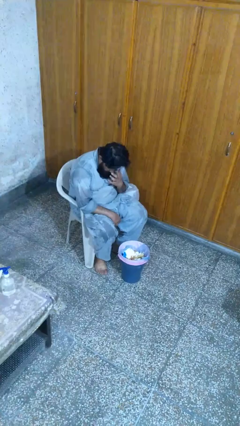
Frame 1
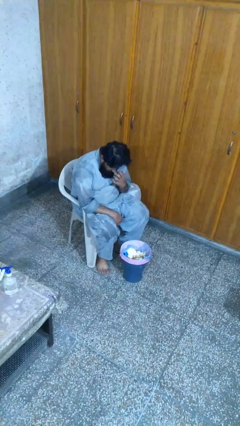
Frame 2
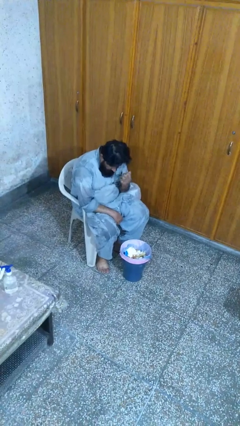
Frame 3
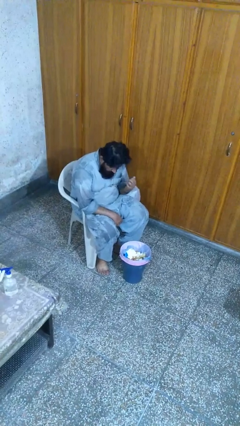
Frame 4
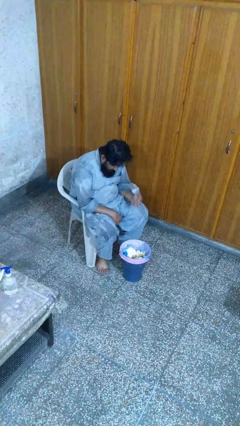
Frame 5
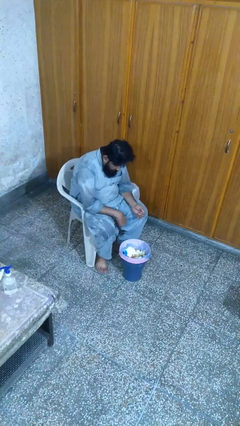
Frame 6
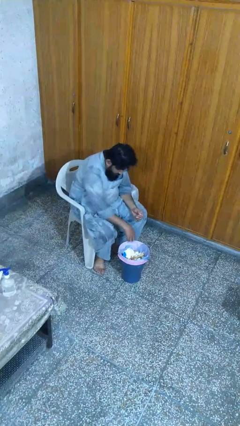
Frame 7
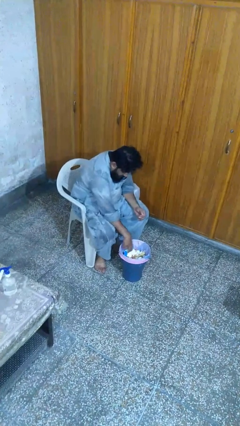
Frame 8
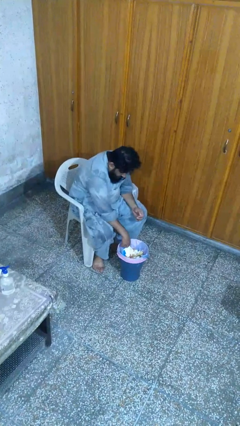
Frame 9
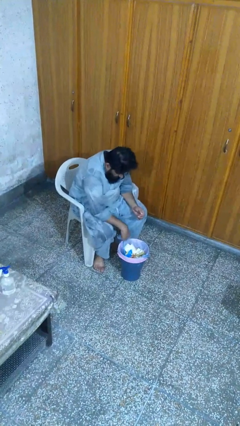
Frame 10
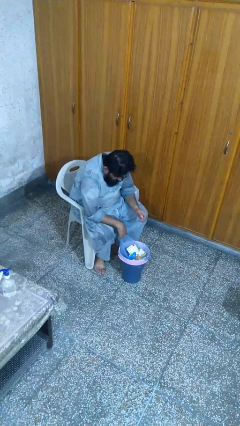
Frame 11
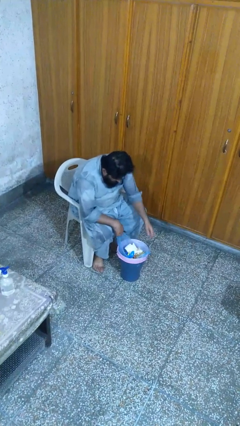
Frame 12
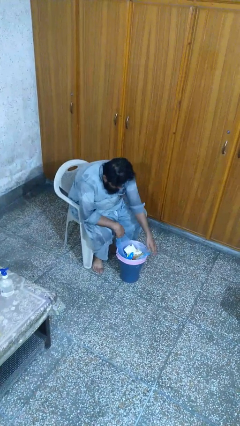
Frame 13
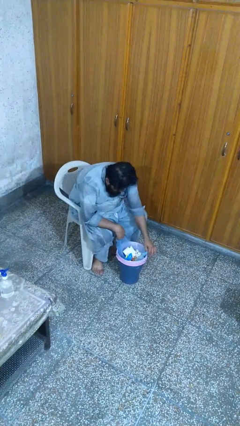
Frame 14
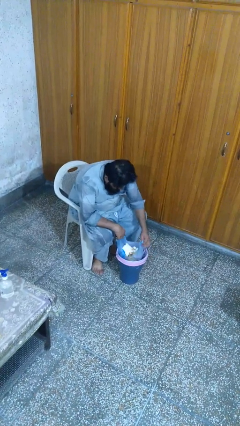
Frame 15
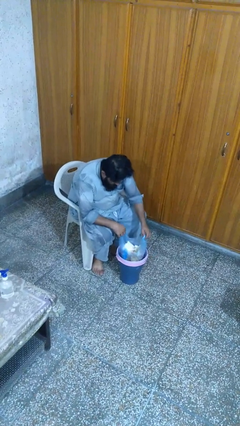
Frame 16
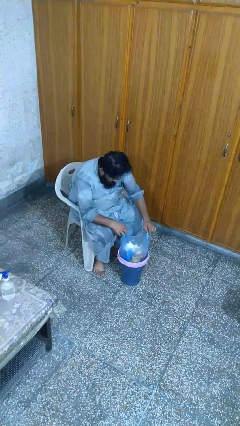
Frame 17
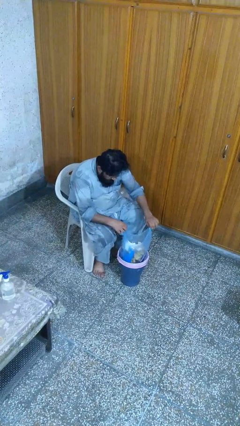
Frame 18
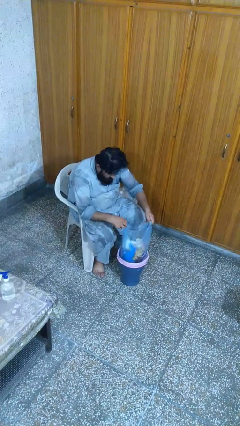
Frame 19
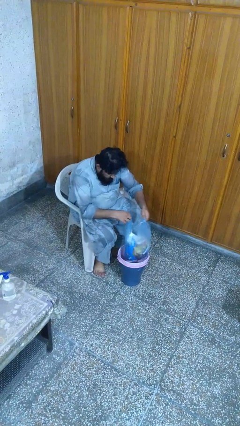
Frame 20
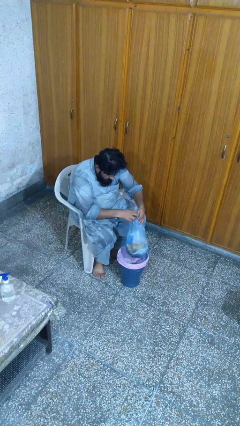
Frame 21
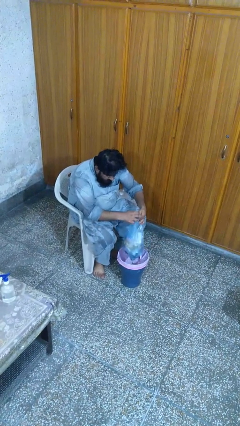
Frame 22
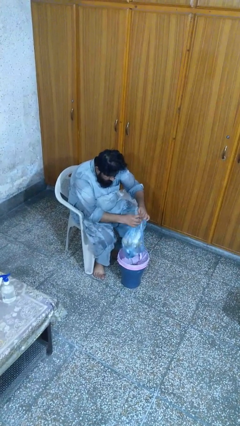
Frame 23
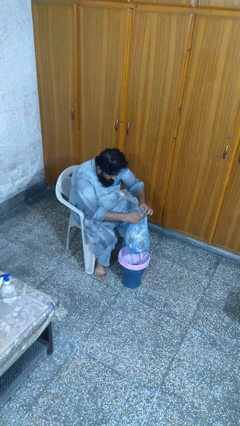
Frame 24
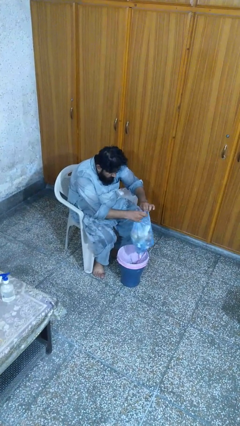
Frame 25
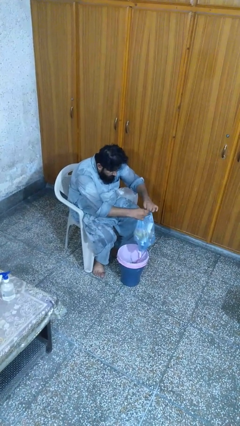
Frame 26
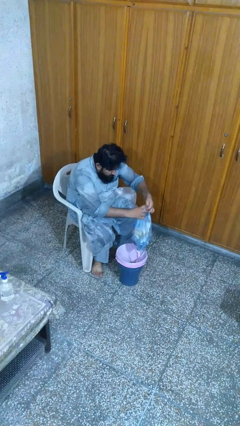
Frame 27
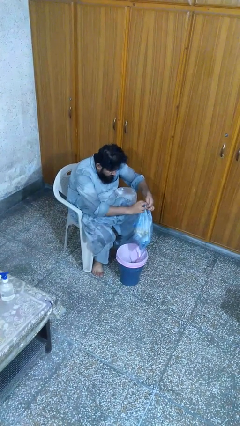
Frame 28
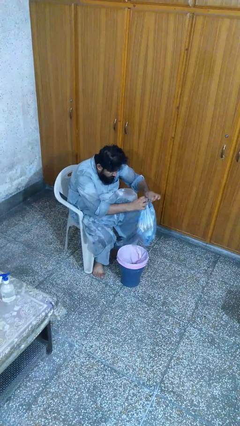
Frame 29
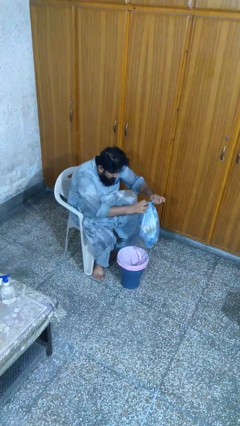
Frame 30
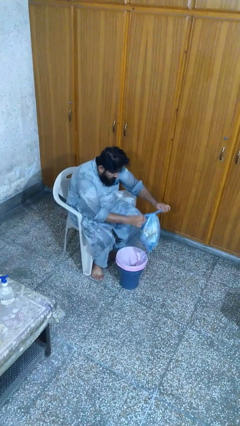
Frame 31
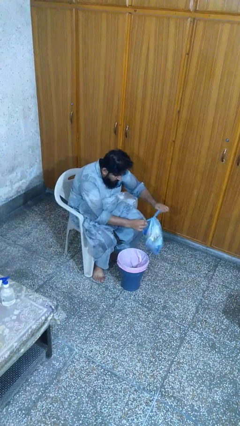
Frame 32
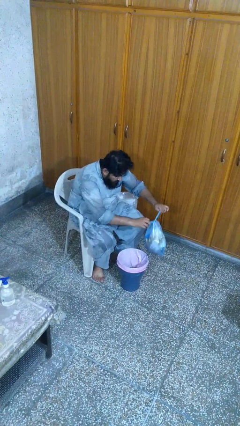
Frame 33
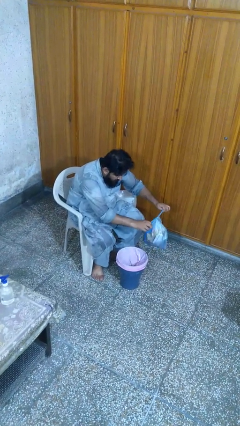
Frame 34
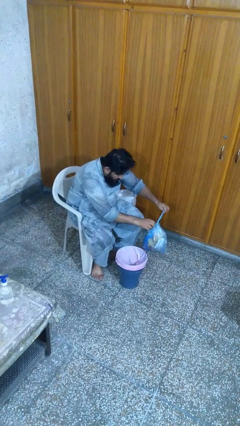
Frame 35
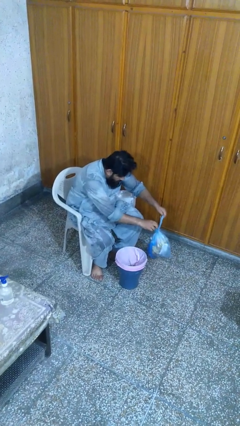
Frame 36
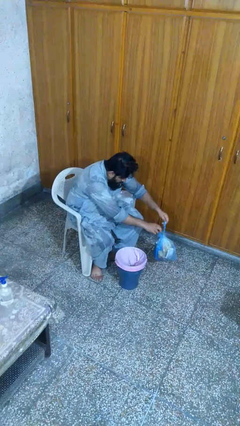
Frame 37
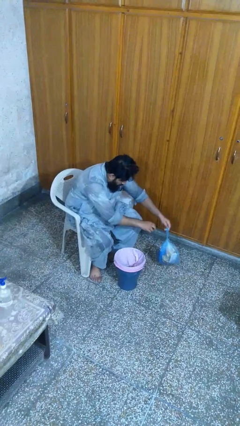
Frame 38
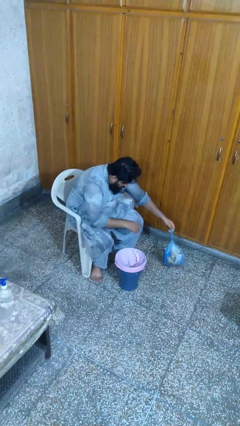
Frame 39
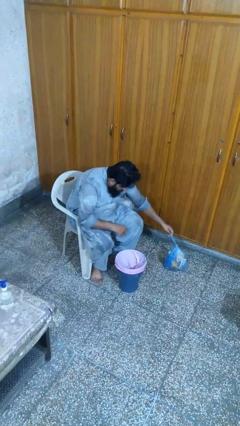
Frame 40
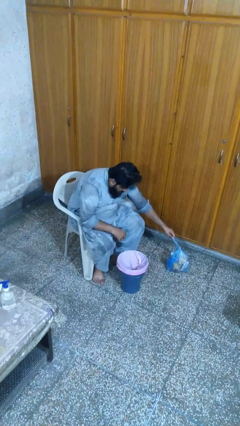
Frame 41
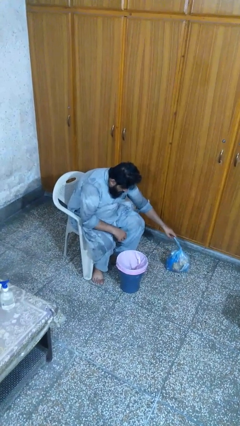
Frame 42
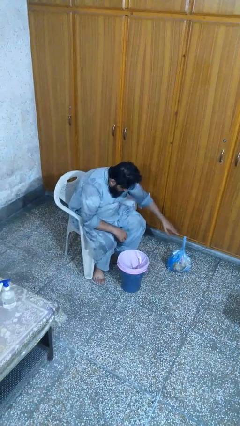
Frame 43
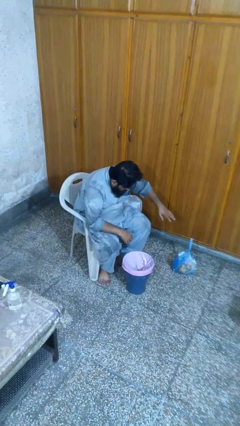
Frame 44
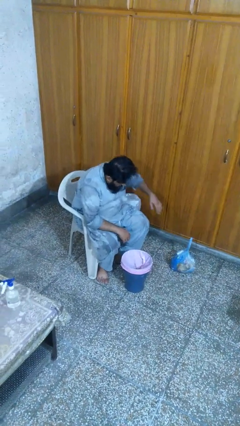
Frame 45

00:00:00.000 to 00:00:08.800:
person removes trashbag from trashcan

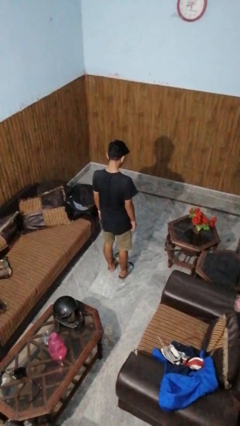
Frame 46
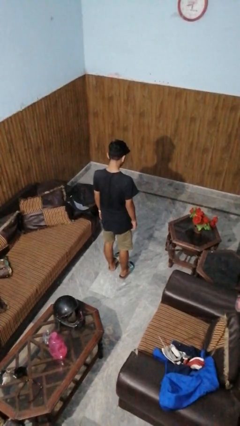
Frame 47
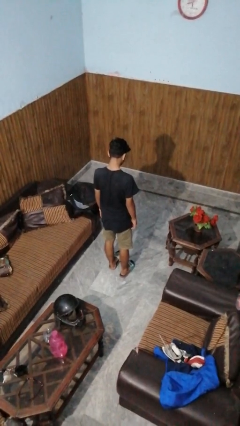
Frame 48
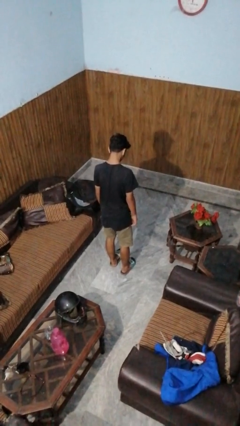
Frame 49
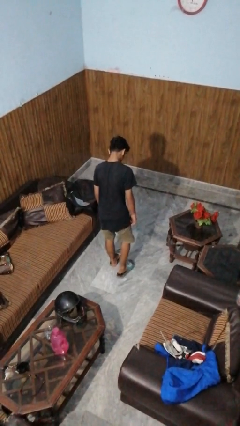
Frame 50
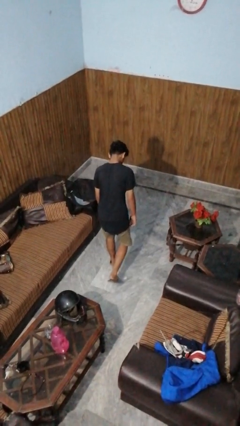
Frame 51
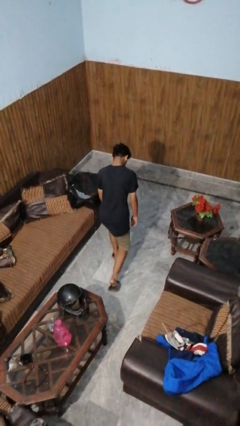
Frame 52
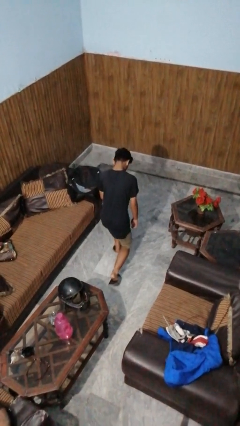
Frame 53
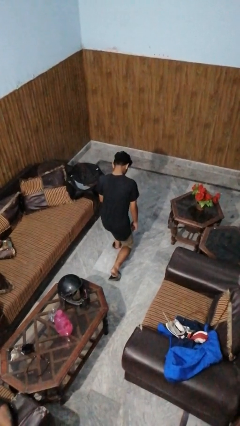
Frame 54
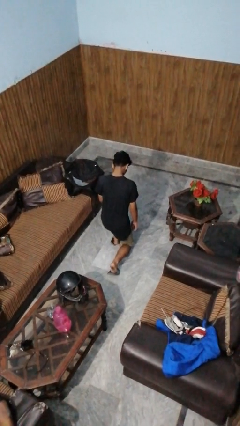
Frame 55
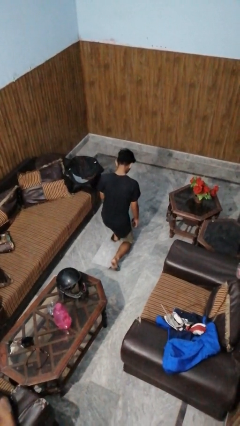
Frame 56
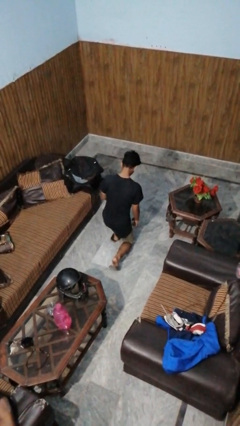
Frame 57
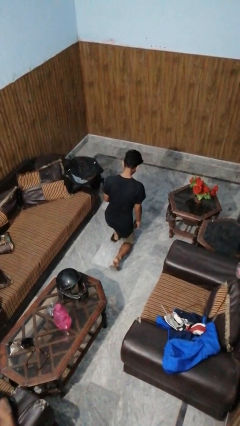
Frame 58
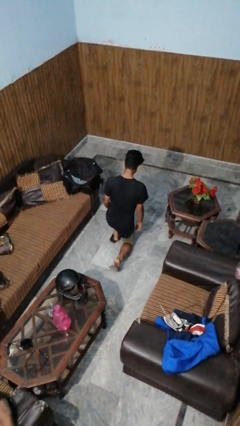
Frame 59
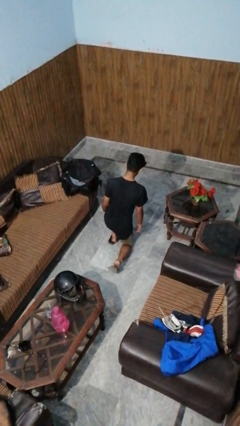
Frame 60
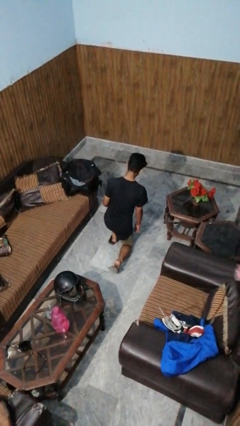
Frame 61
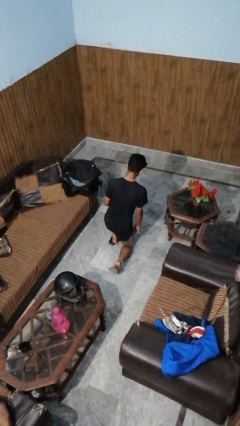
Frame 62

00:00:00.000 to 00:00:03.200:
person kneels

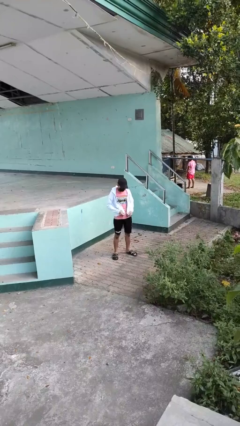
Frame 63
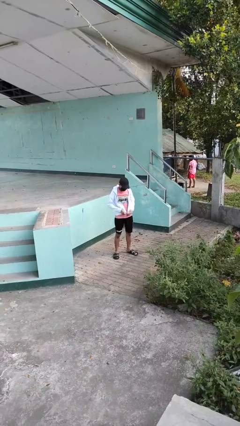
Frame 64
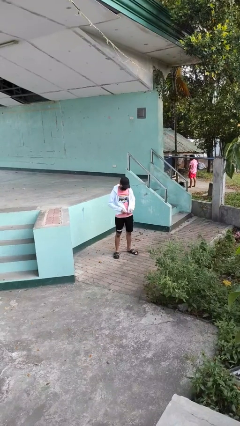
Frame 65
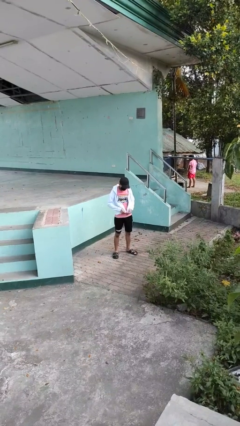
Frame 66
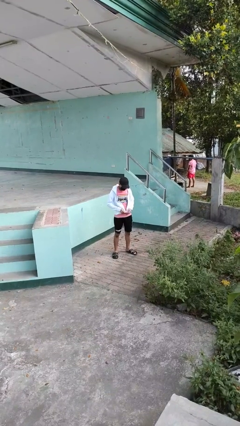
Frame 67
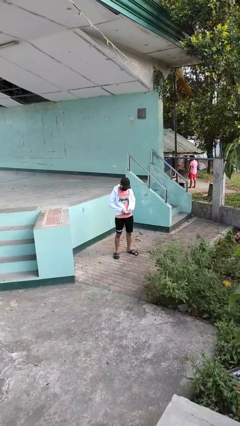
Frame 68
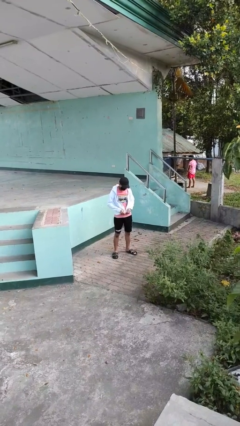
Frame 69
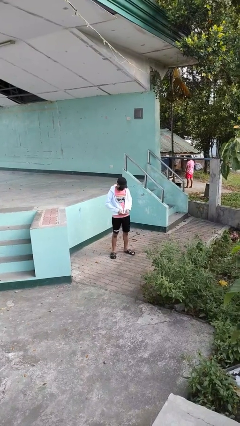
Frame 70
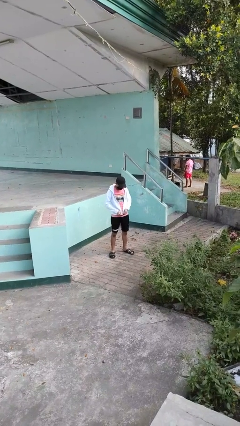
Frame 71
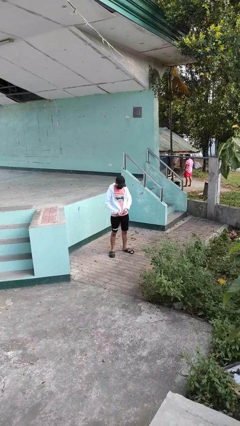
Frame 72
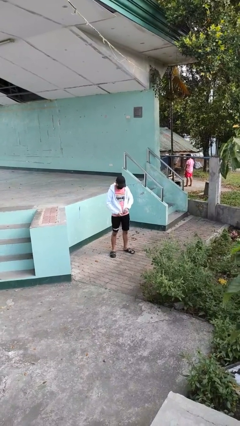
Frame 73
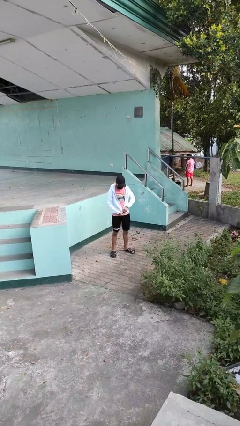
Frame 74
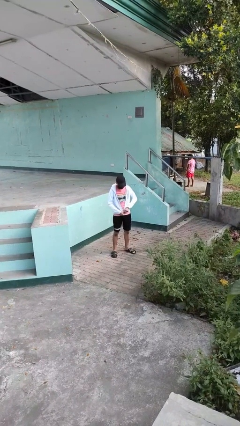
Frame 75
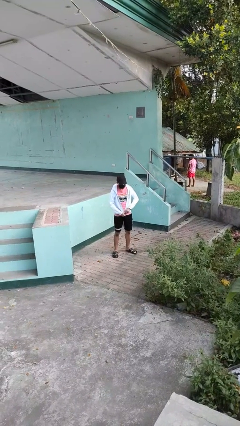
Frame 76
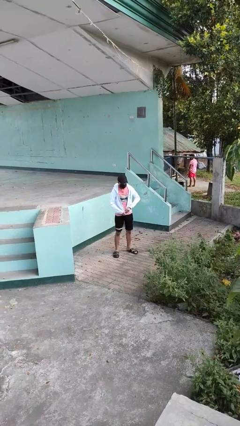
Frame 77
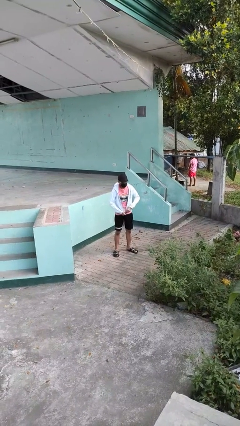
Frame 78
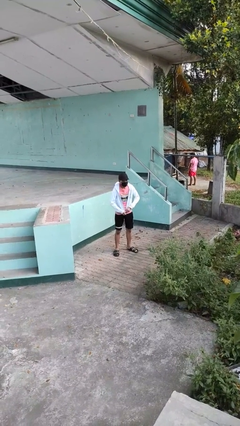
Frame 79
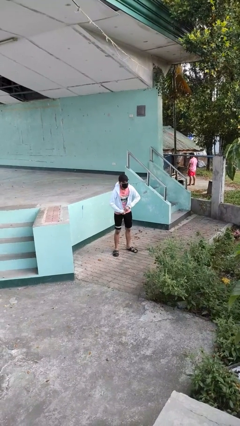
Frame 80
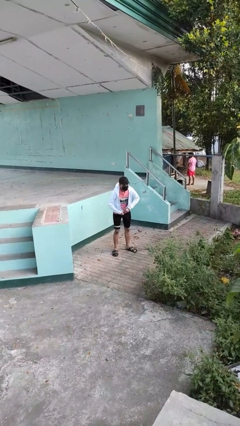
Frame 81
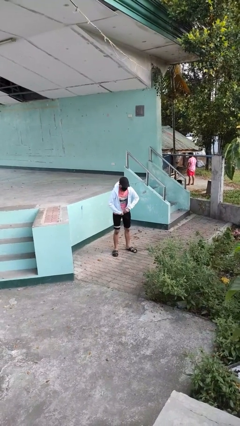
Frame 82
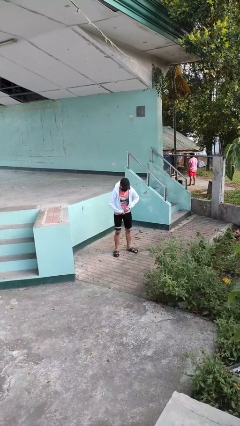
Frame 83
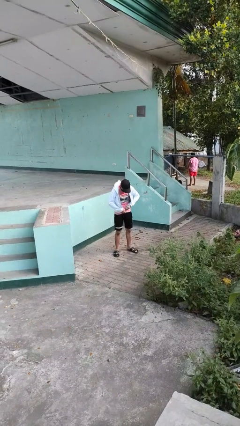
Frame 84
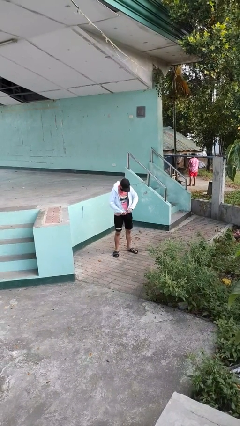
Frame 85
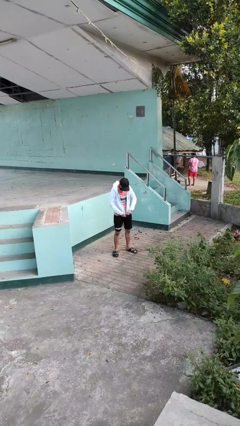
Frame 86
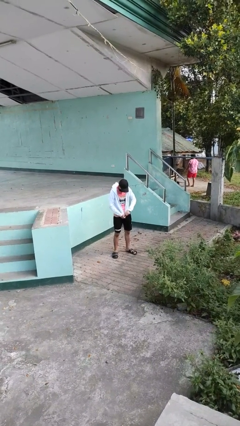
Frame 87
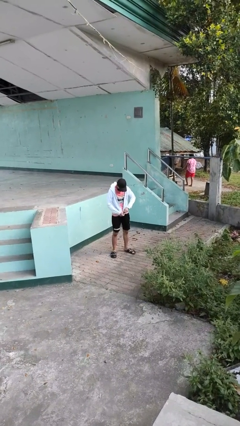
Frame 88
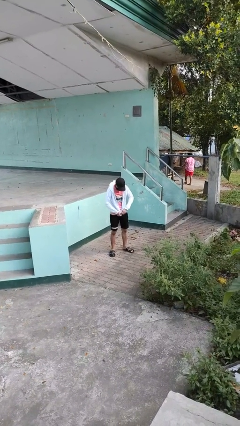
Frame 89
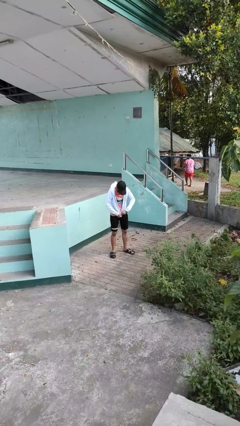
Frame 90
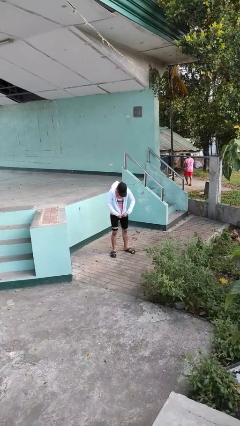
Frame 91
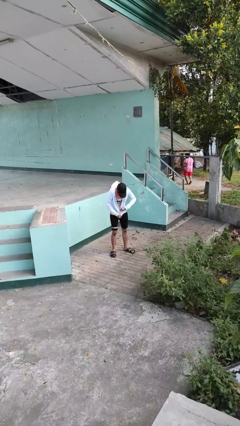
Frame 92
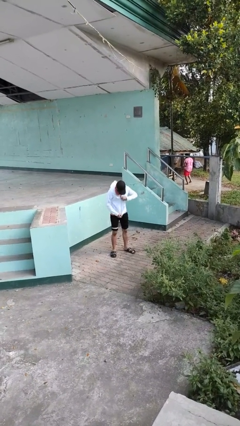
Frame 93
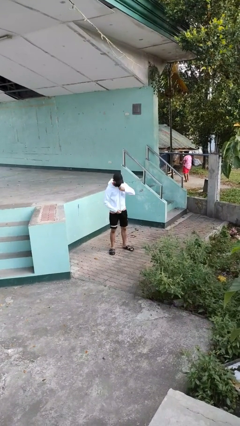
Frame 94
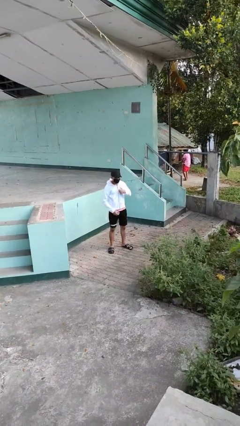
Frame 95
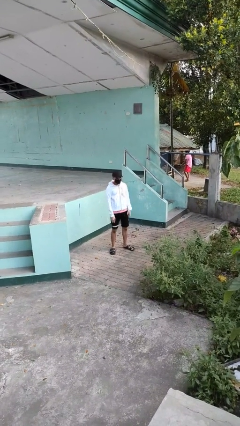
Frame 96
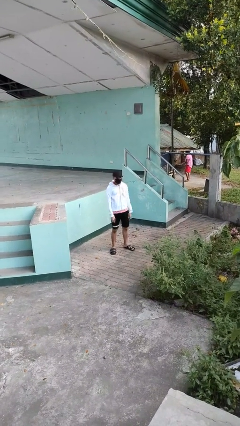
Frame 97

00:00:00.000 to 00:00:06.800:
person zips up jacket
